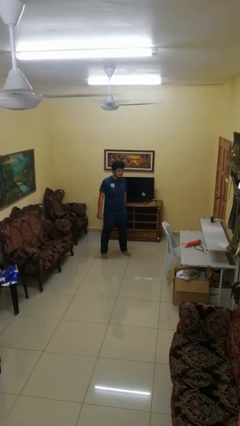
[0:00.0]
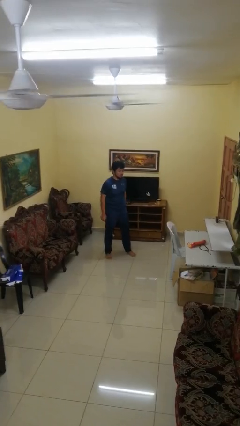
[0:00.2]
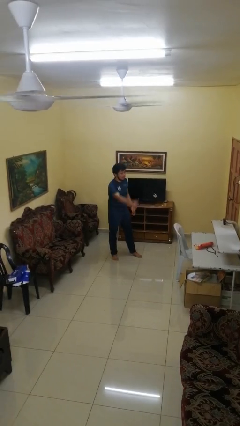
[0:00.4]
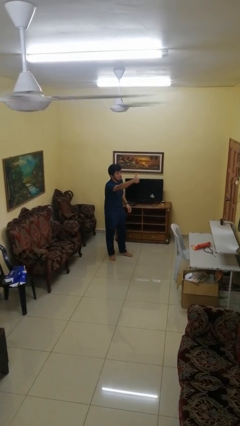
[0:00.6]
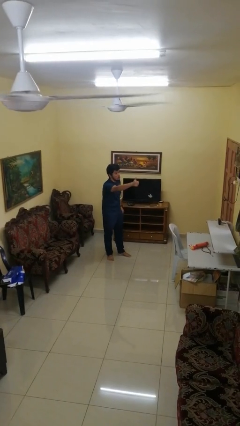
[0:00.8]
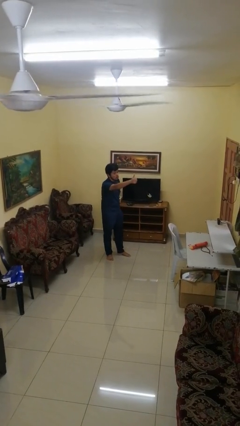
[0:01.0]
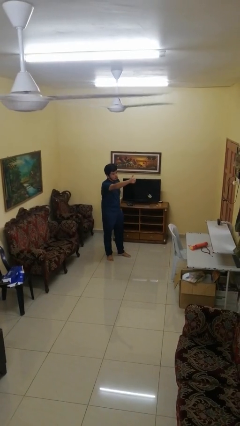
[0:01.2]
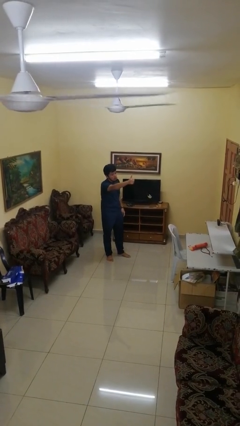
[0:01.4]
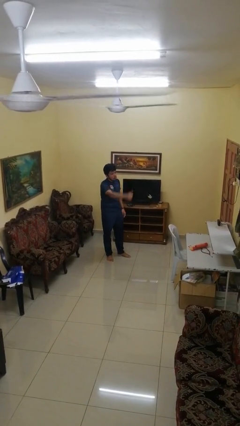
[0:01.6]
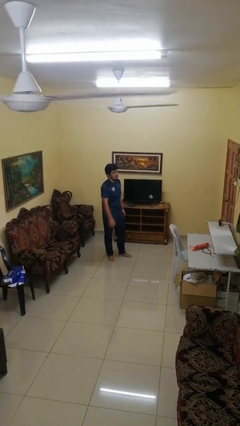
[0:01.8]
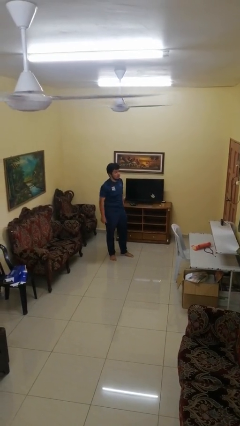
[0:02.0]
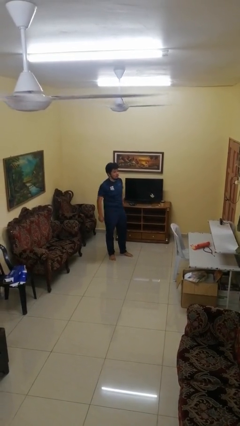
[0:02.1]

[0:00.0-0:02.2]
person gestures thumbs up

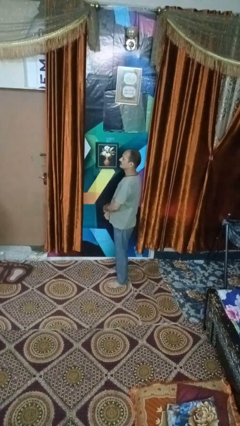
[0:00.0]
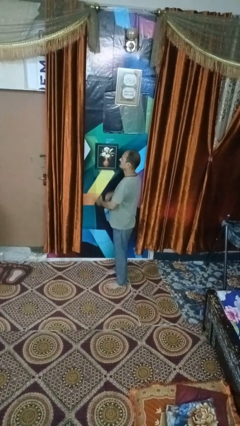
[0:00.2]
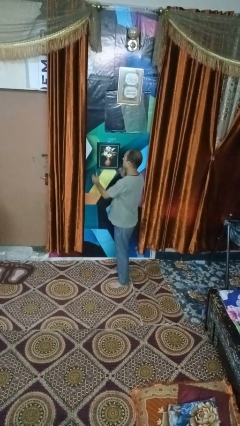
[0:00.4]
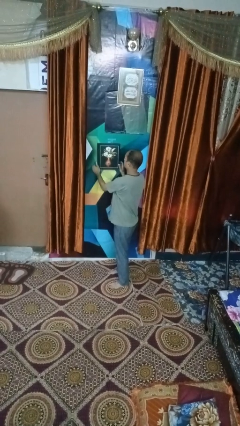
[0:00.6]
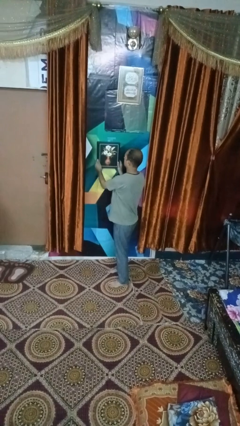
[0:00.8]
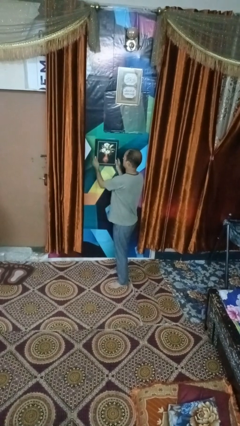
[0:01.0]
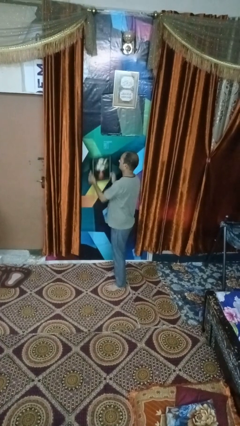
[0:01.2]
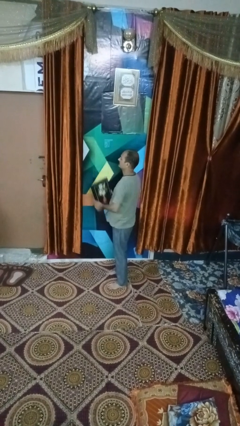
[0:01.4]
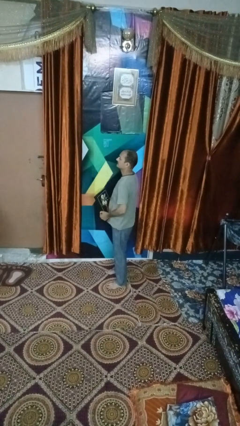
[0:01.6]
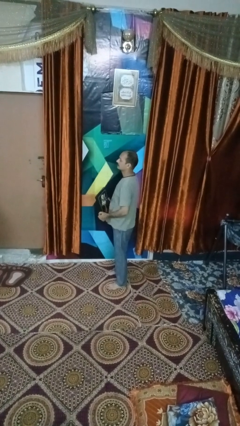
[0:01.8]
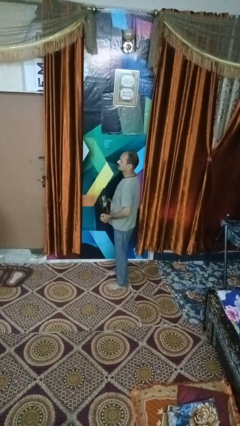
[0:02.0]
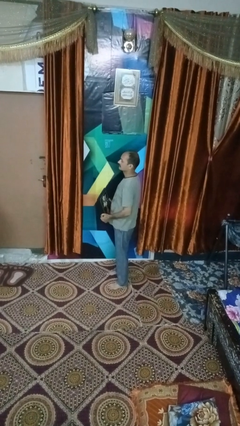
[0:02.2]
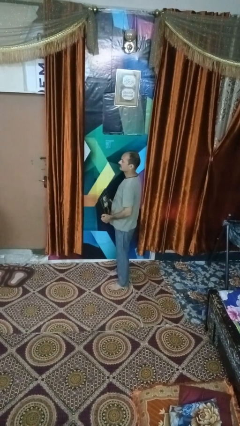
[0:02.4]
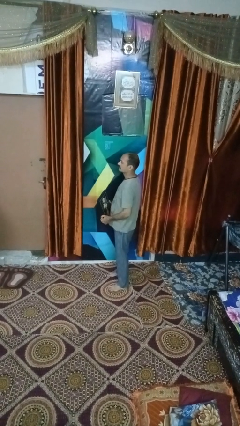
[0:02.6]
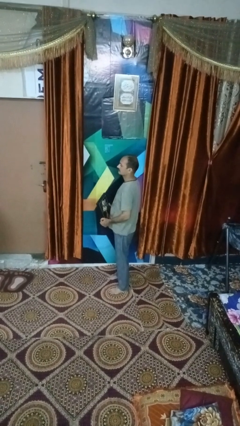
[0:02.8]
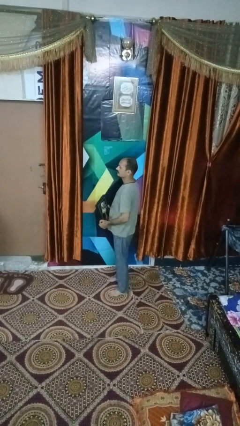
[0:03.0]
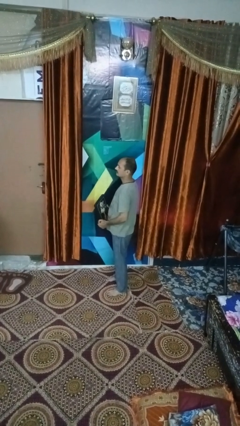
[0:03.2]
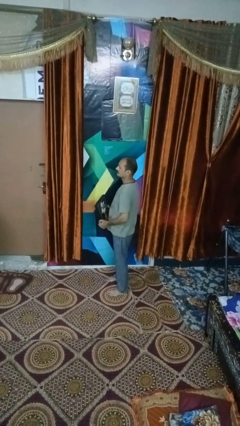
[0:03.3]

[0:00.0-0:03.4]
person takes down picture frame

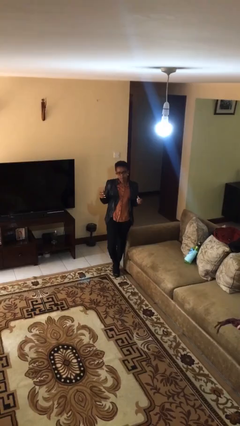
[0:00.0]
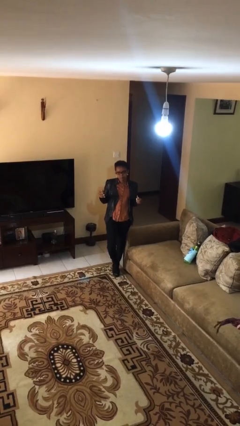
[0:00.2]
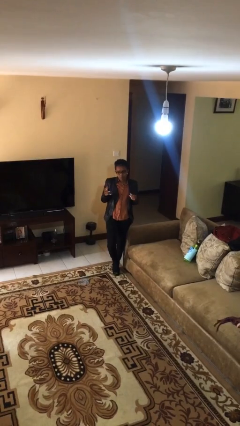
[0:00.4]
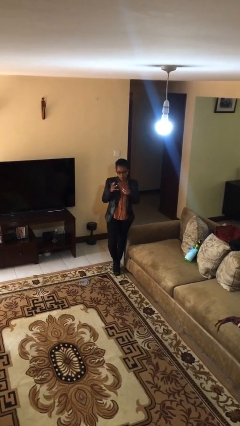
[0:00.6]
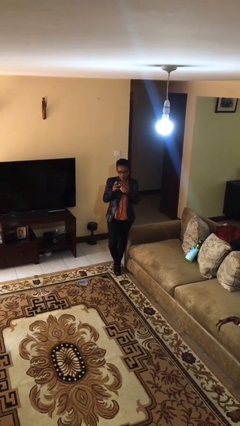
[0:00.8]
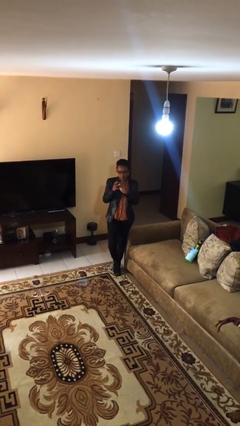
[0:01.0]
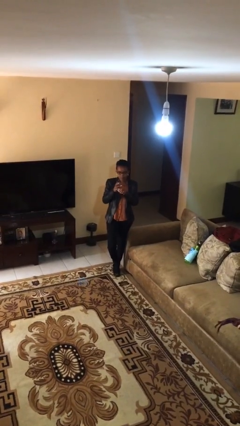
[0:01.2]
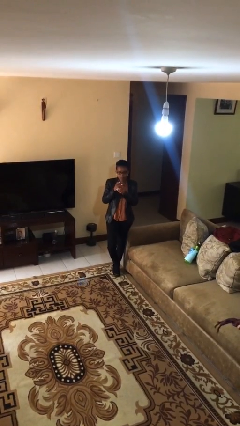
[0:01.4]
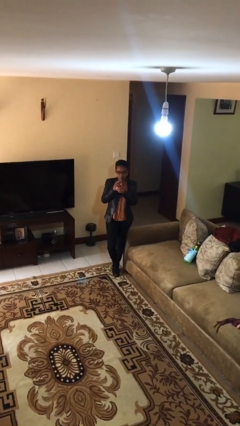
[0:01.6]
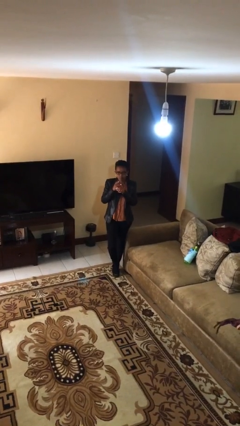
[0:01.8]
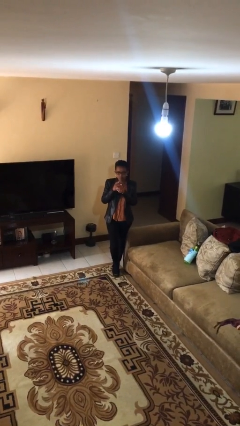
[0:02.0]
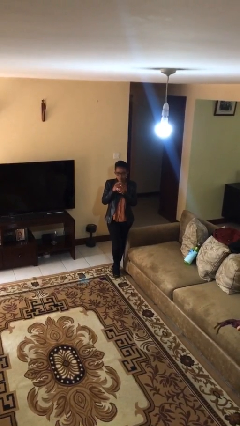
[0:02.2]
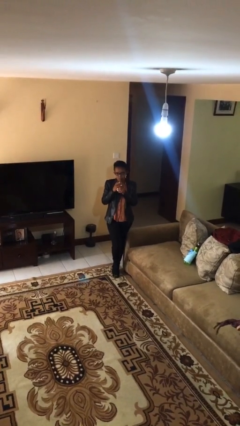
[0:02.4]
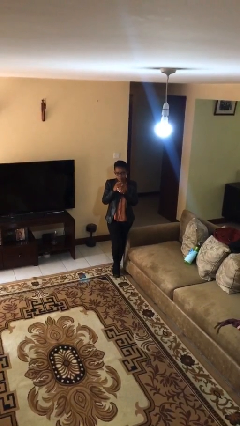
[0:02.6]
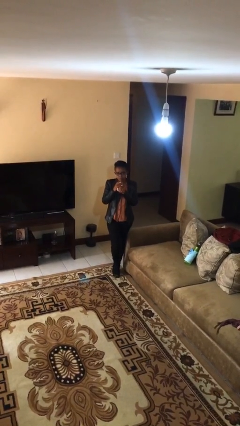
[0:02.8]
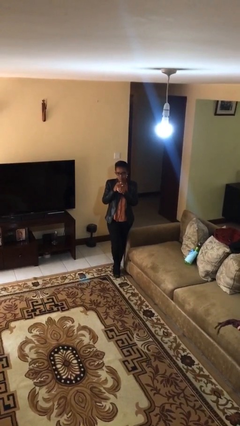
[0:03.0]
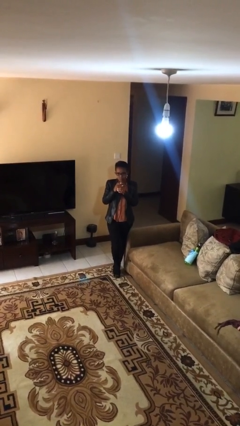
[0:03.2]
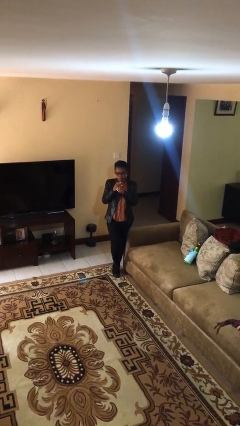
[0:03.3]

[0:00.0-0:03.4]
person puts on ring

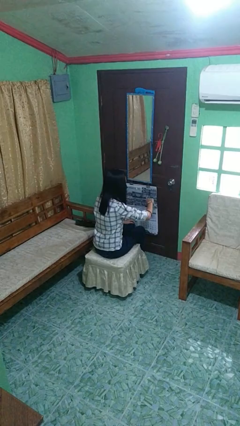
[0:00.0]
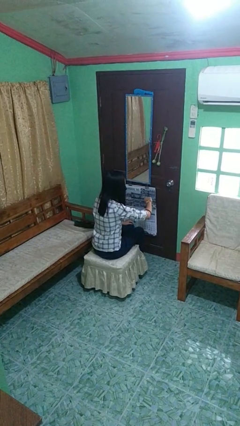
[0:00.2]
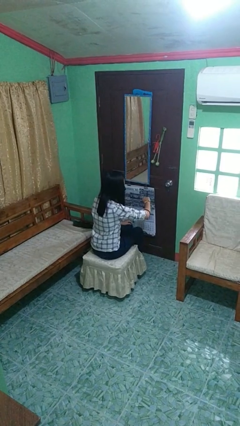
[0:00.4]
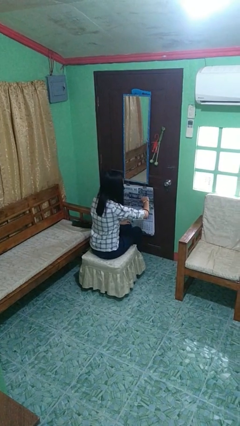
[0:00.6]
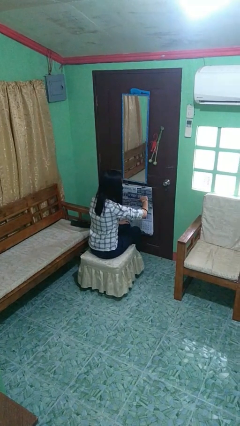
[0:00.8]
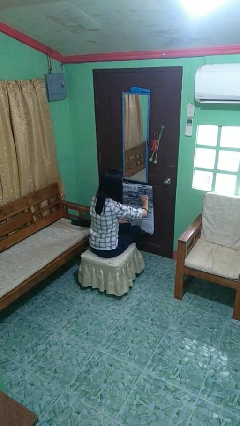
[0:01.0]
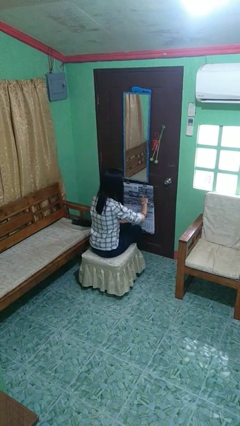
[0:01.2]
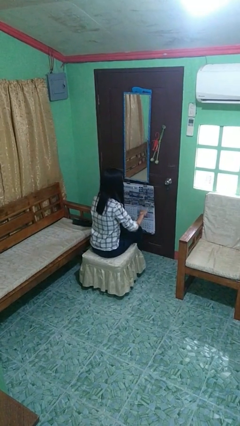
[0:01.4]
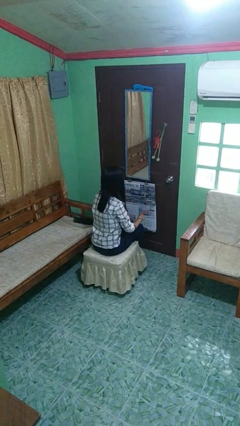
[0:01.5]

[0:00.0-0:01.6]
person looks at wristwatch

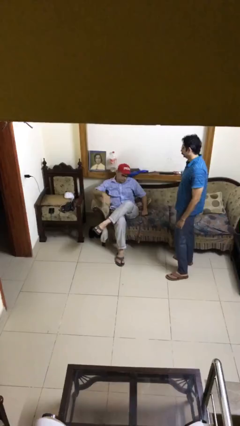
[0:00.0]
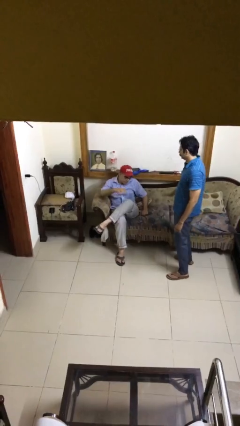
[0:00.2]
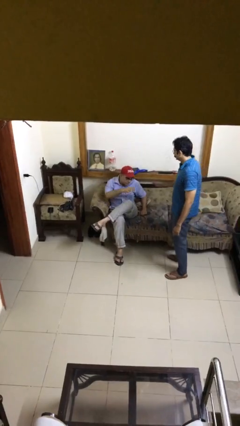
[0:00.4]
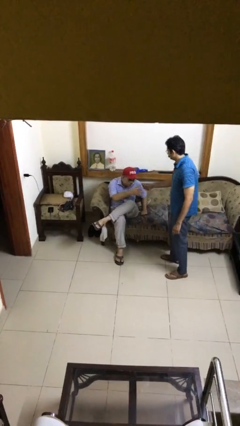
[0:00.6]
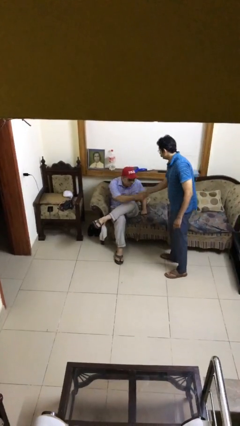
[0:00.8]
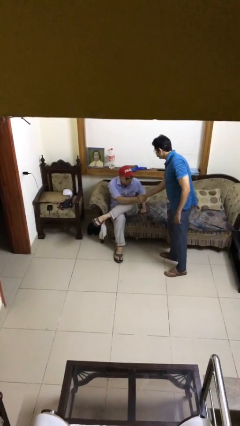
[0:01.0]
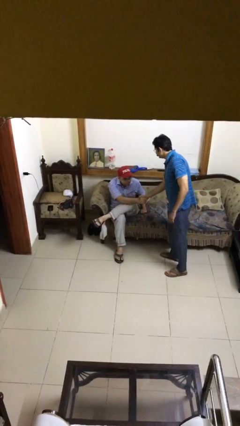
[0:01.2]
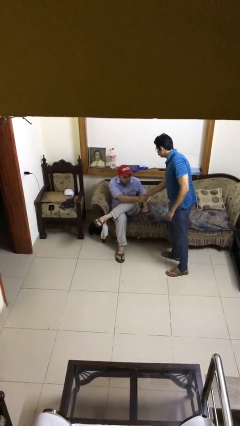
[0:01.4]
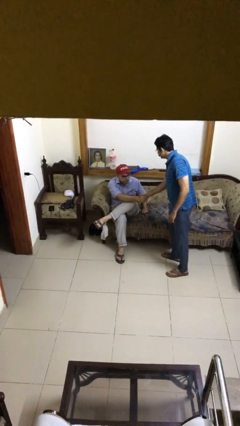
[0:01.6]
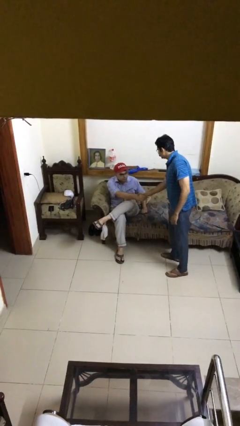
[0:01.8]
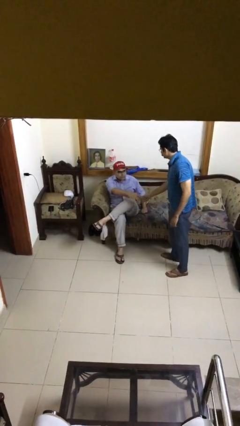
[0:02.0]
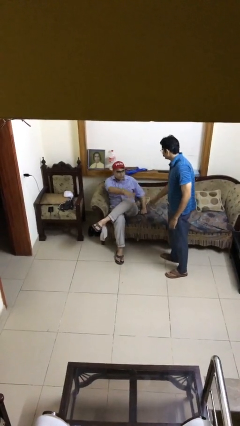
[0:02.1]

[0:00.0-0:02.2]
person shakes hand

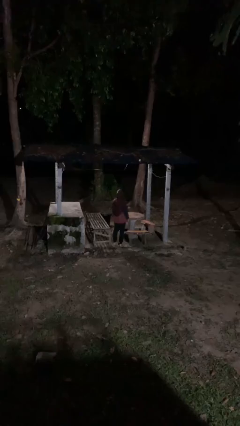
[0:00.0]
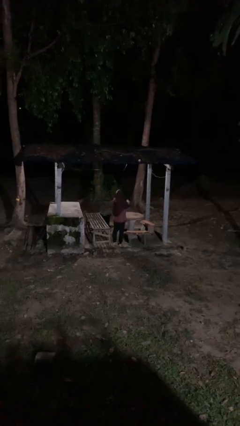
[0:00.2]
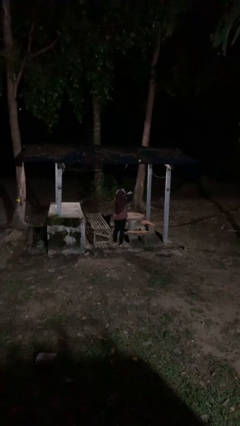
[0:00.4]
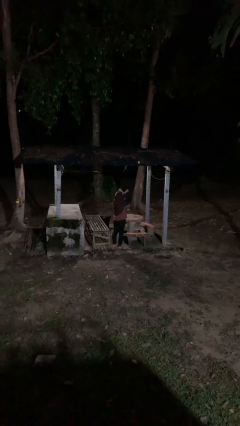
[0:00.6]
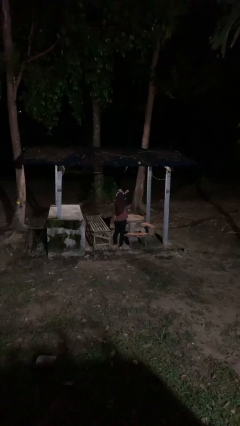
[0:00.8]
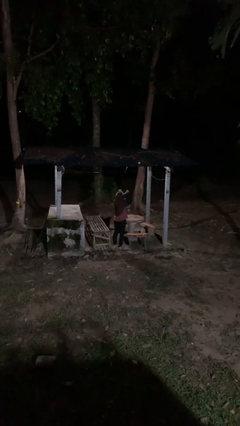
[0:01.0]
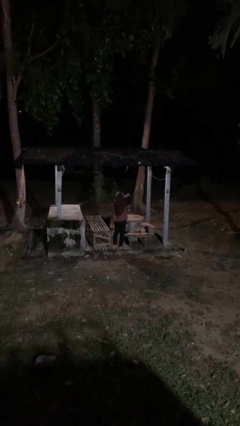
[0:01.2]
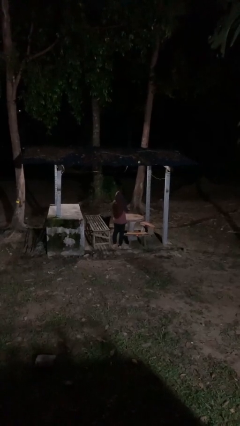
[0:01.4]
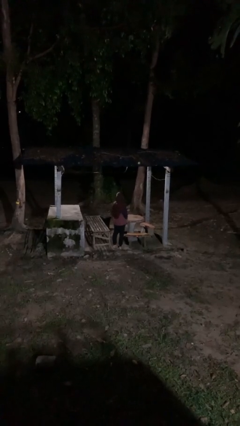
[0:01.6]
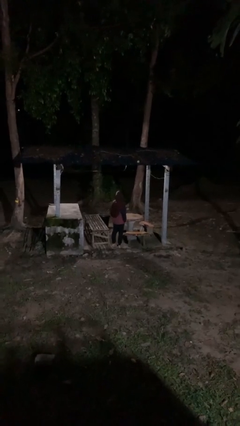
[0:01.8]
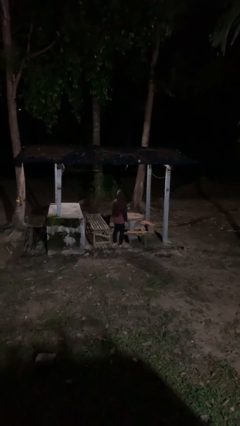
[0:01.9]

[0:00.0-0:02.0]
person gestures arms x

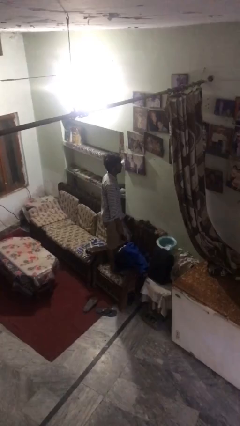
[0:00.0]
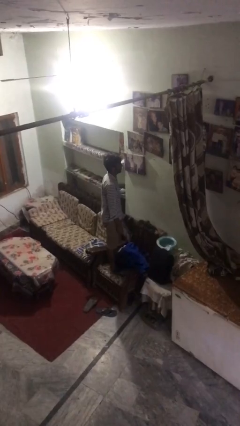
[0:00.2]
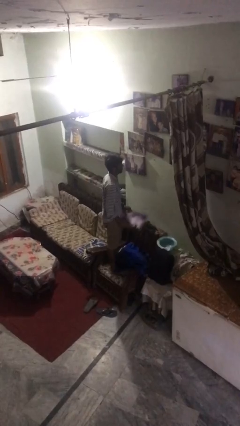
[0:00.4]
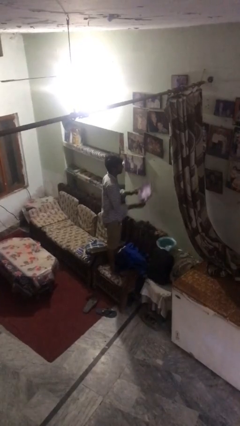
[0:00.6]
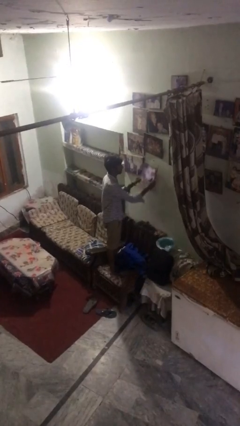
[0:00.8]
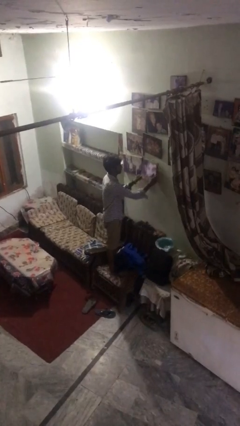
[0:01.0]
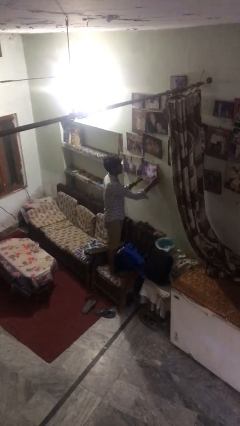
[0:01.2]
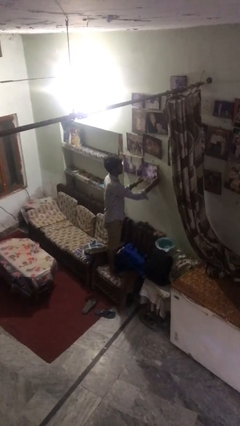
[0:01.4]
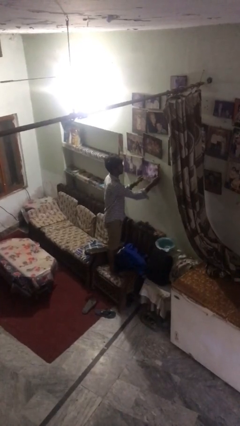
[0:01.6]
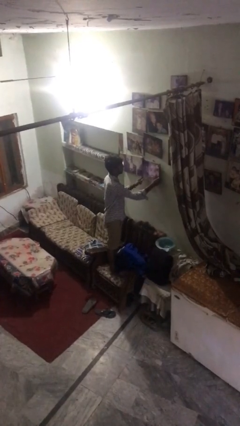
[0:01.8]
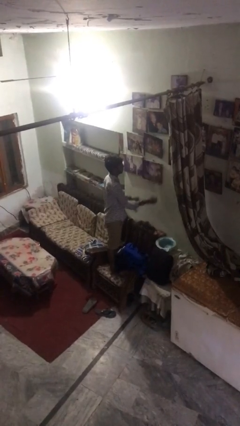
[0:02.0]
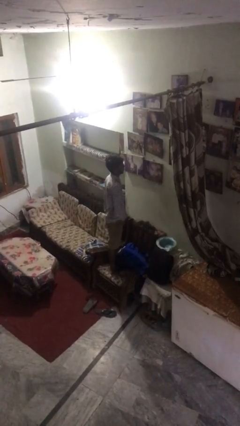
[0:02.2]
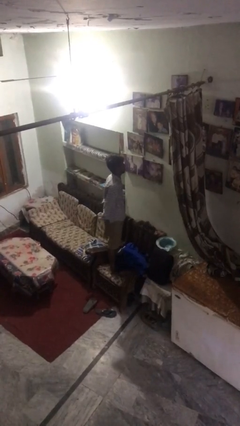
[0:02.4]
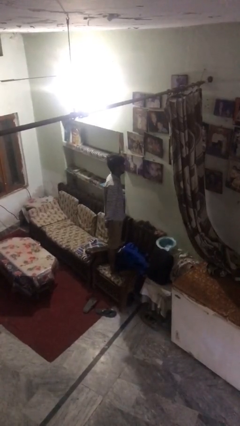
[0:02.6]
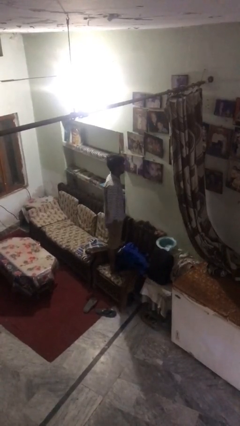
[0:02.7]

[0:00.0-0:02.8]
person puts up picture frame
